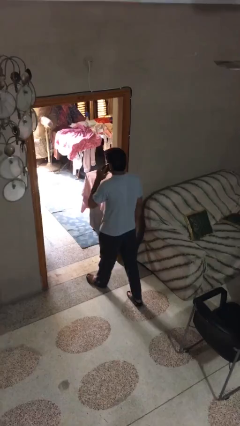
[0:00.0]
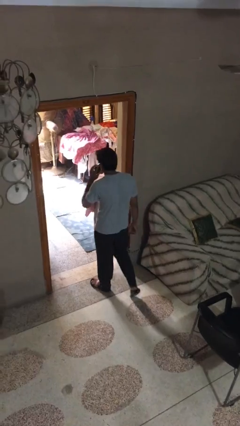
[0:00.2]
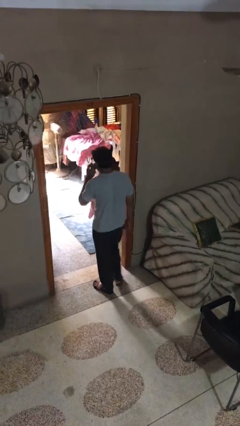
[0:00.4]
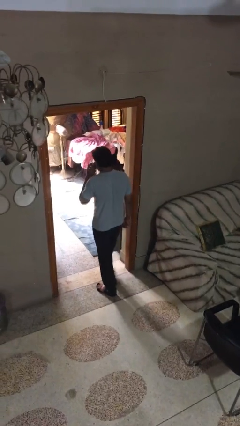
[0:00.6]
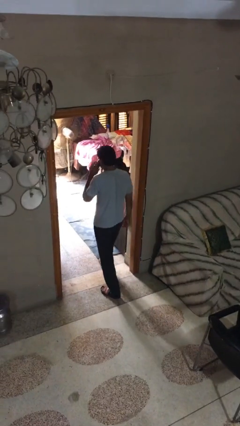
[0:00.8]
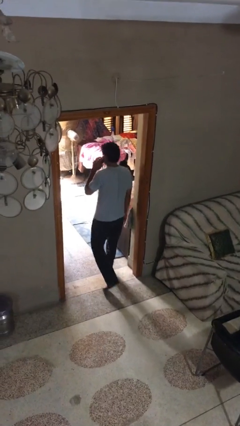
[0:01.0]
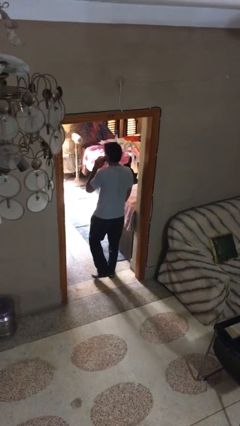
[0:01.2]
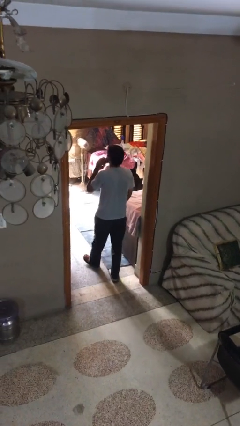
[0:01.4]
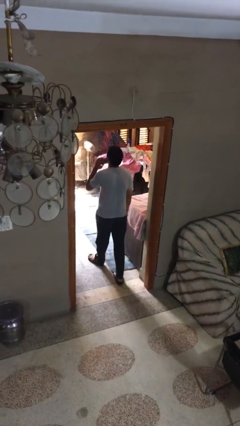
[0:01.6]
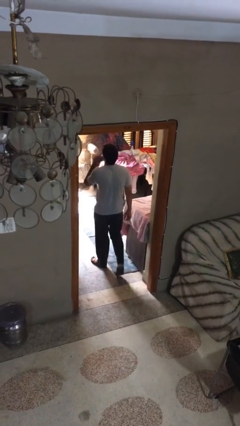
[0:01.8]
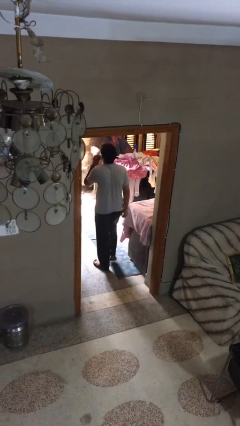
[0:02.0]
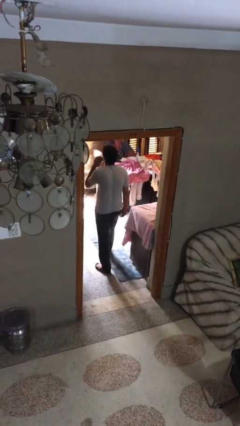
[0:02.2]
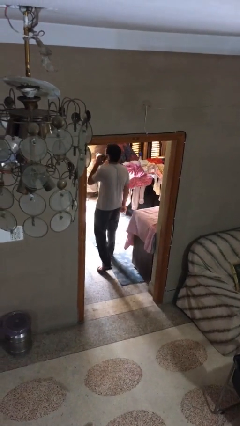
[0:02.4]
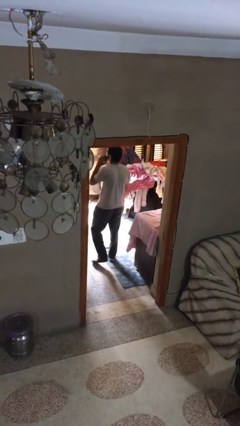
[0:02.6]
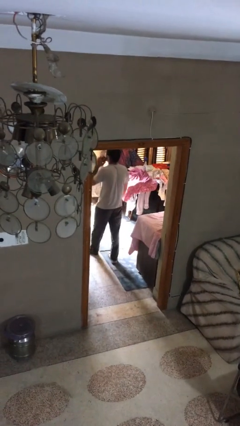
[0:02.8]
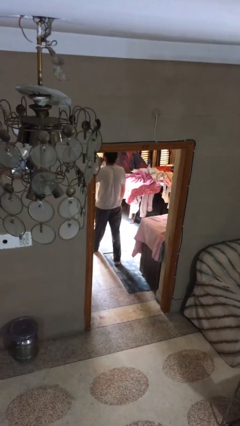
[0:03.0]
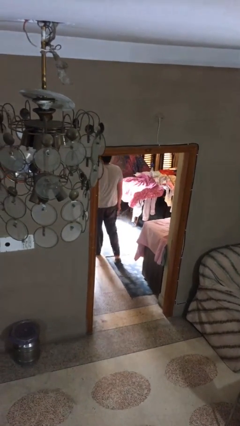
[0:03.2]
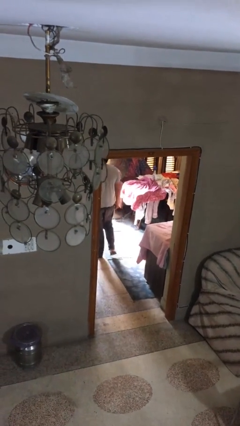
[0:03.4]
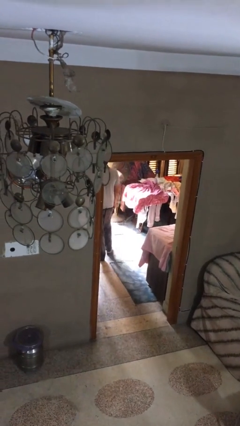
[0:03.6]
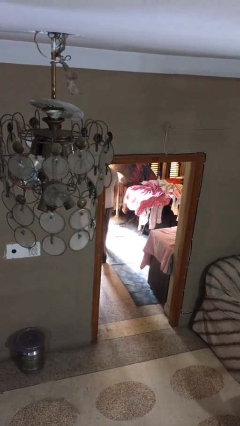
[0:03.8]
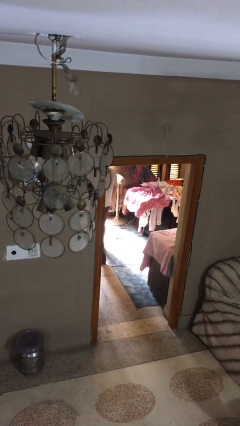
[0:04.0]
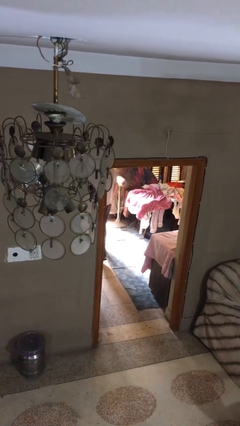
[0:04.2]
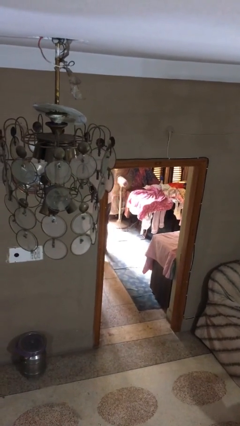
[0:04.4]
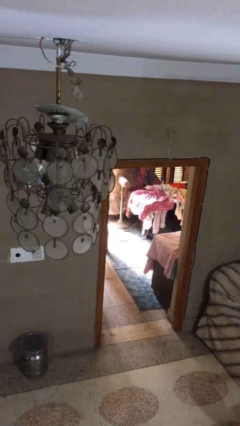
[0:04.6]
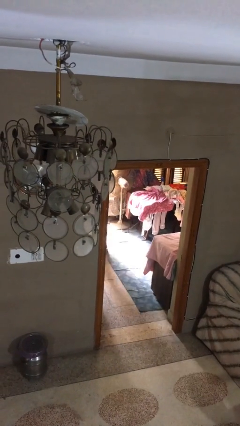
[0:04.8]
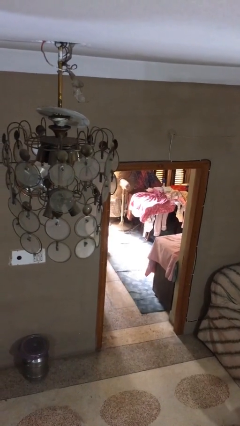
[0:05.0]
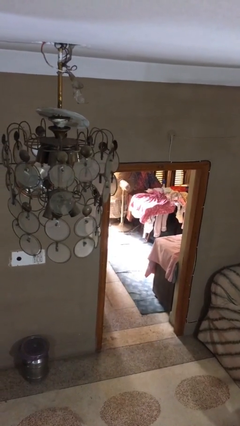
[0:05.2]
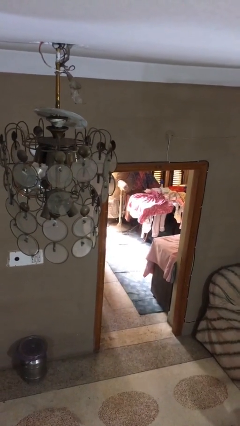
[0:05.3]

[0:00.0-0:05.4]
person exits scene through structure

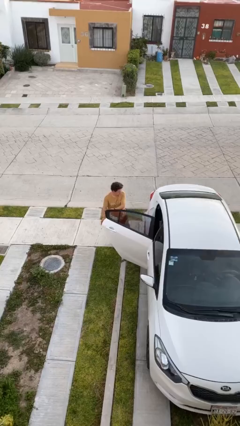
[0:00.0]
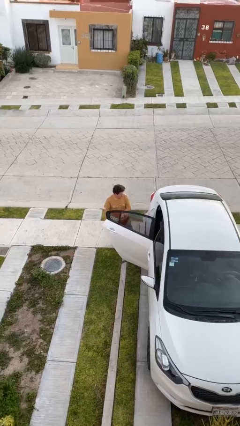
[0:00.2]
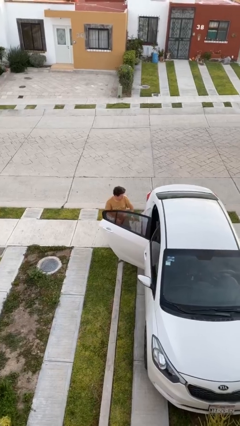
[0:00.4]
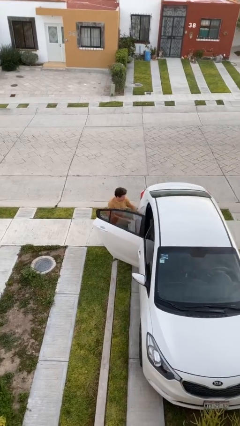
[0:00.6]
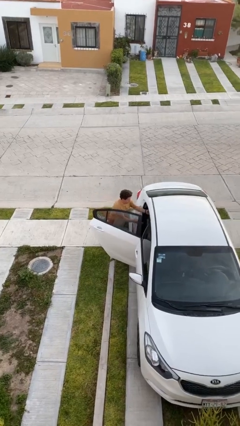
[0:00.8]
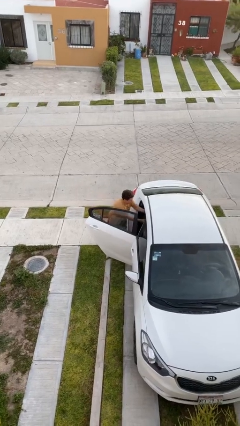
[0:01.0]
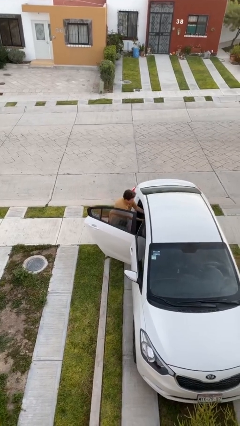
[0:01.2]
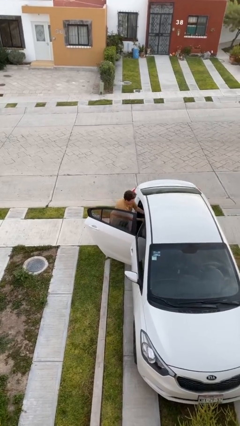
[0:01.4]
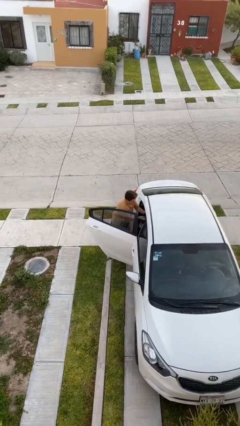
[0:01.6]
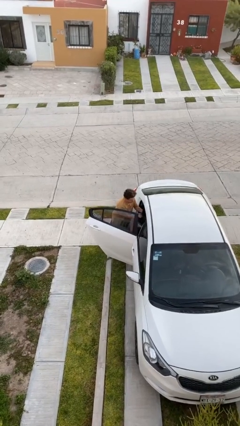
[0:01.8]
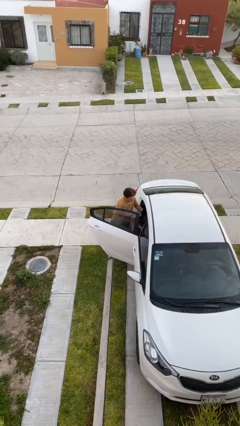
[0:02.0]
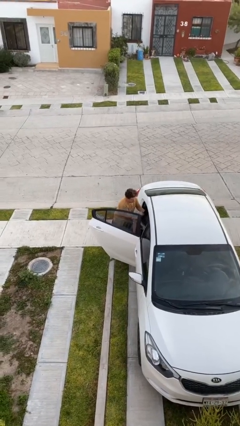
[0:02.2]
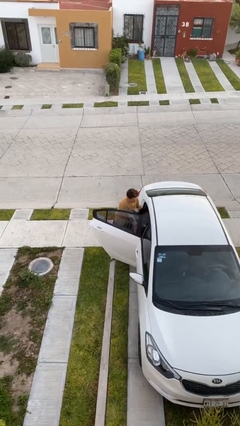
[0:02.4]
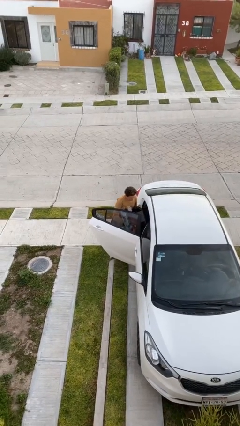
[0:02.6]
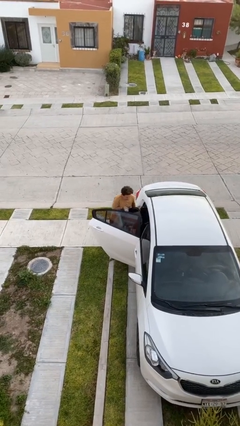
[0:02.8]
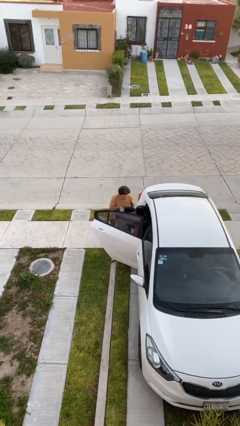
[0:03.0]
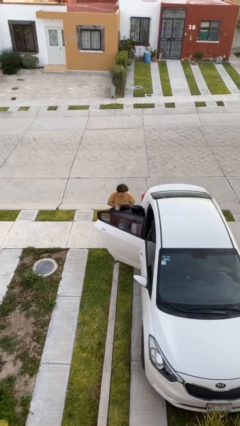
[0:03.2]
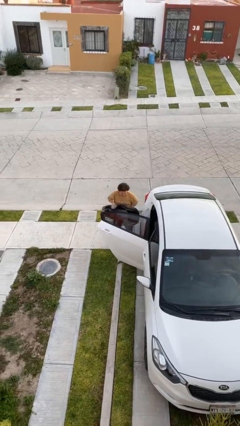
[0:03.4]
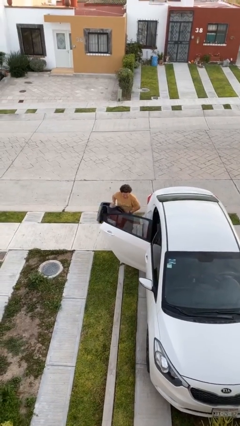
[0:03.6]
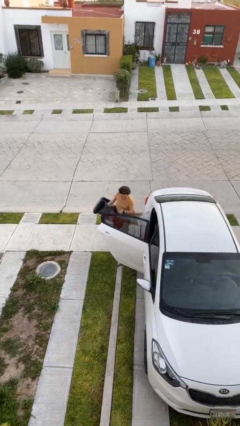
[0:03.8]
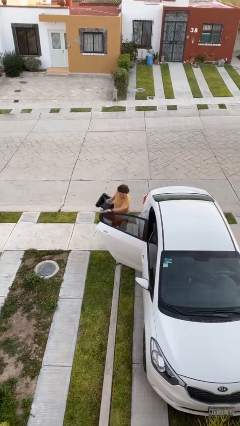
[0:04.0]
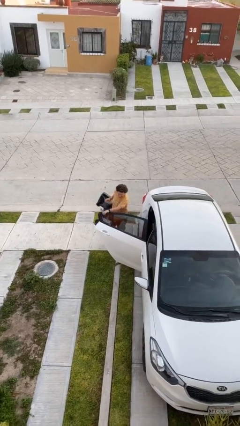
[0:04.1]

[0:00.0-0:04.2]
person unloads car

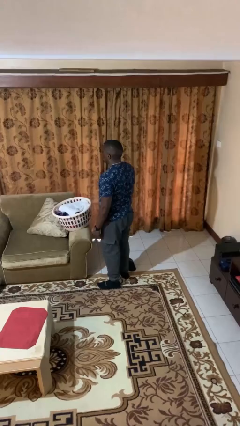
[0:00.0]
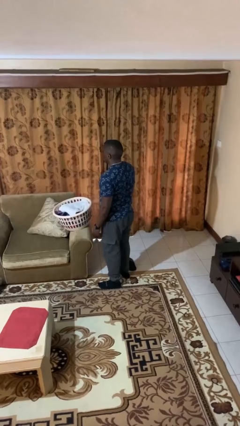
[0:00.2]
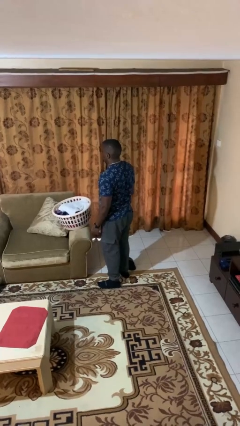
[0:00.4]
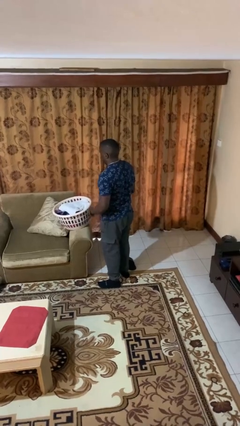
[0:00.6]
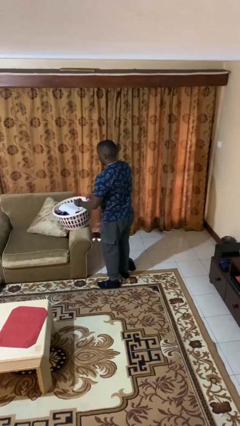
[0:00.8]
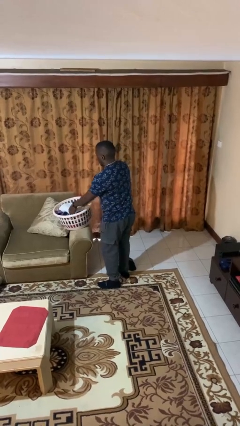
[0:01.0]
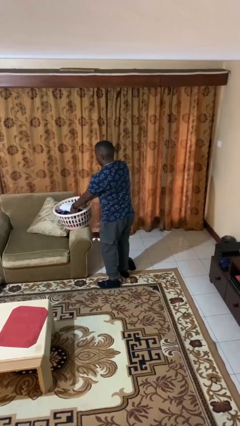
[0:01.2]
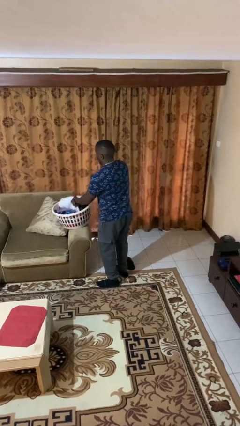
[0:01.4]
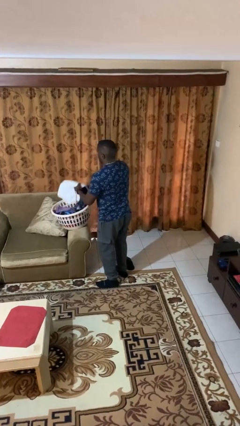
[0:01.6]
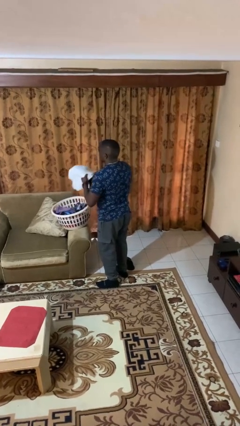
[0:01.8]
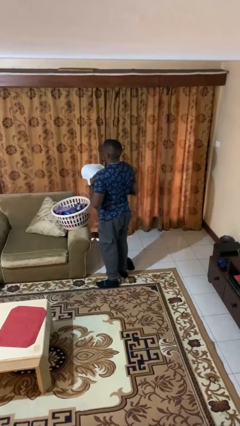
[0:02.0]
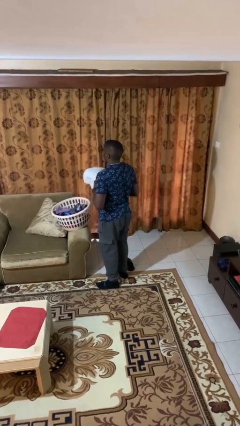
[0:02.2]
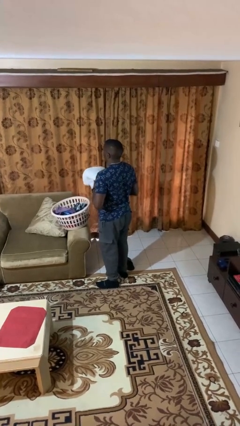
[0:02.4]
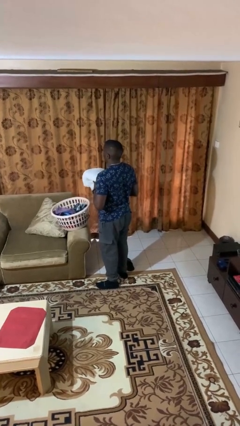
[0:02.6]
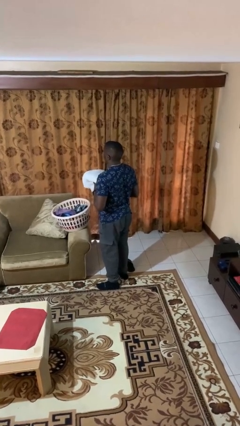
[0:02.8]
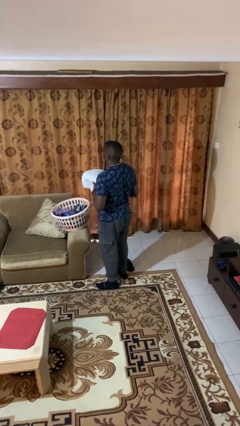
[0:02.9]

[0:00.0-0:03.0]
person takes object from basket

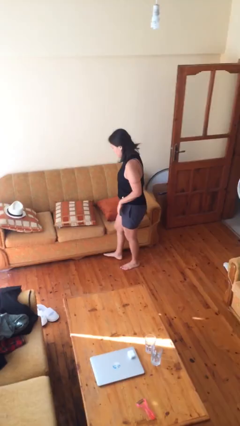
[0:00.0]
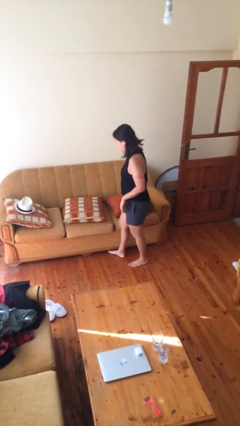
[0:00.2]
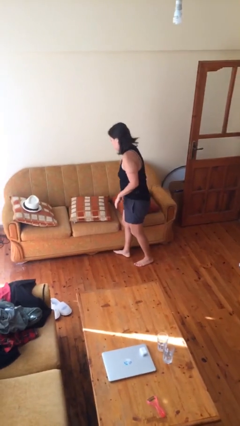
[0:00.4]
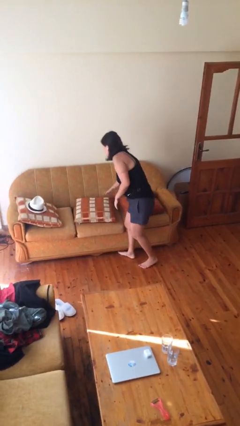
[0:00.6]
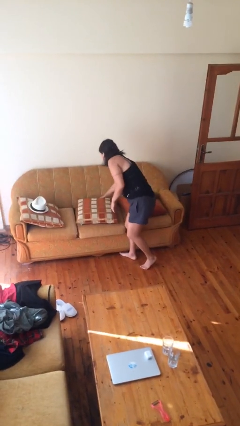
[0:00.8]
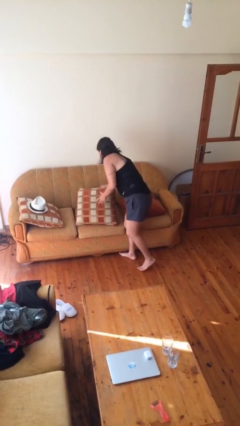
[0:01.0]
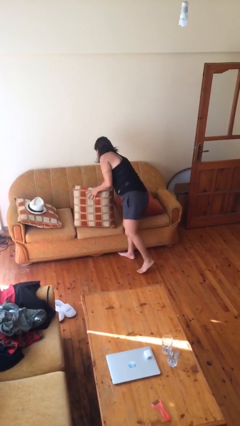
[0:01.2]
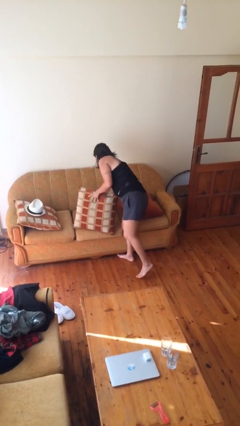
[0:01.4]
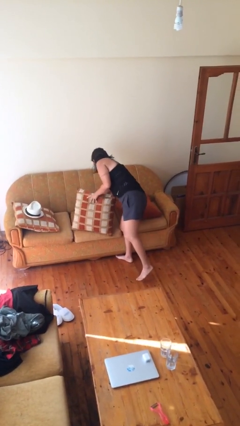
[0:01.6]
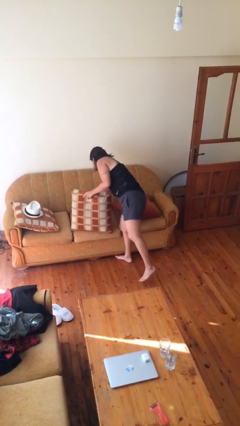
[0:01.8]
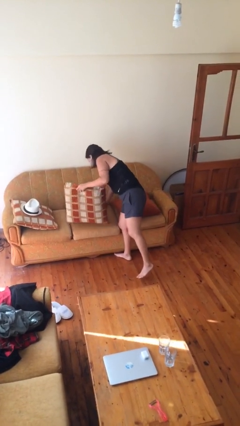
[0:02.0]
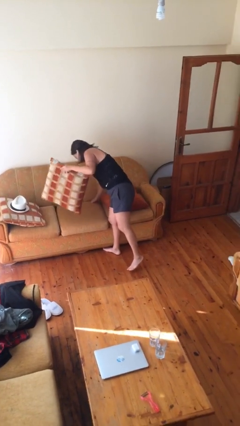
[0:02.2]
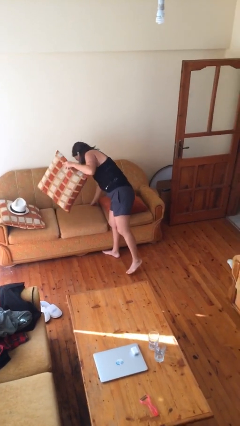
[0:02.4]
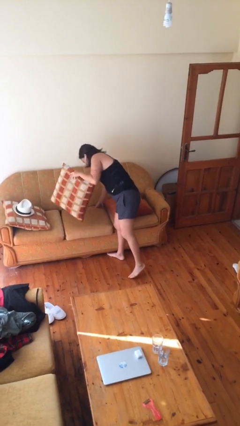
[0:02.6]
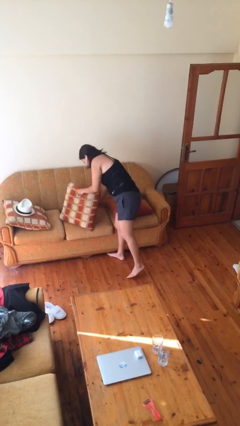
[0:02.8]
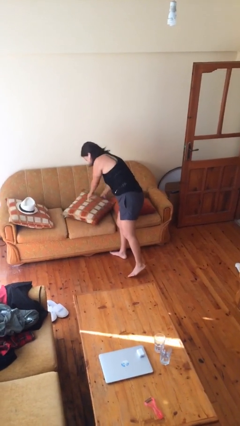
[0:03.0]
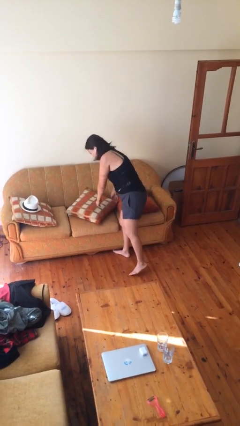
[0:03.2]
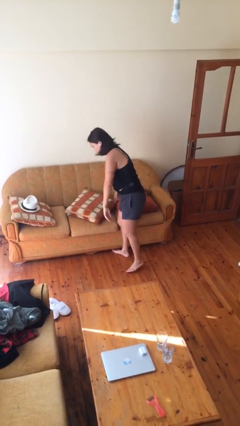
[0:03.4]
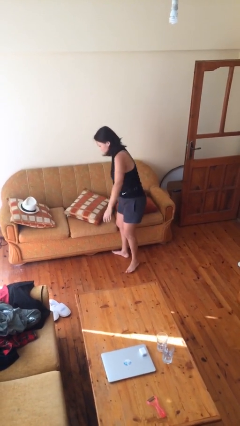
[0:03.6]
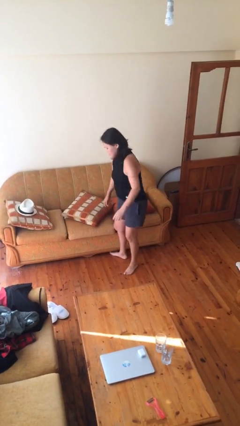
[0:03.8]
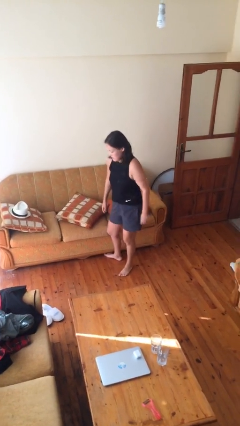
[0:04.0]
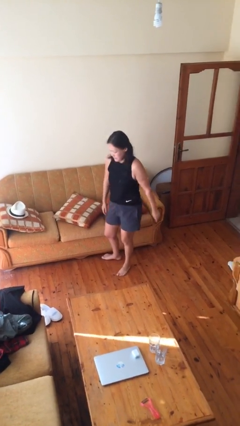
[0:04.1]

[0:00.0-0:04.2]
person searches in couch

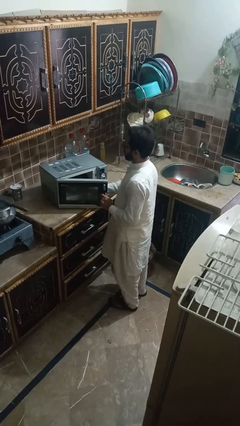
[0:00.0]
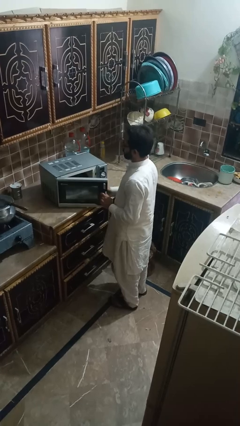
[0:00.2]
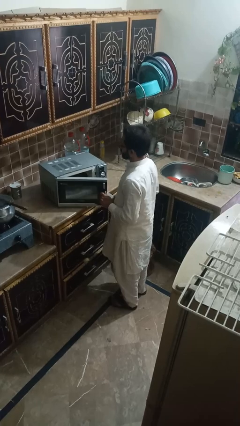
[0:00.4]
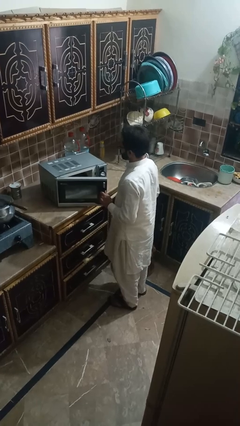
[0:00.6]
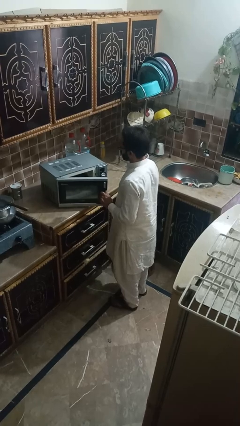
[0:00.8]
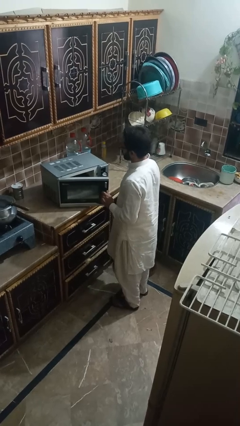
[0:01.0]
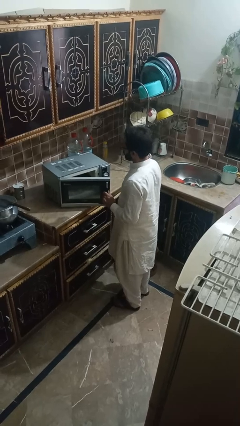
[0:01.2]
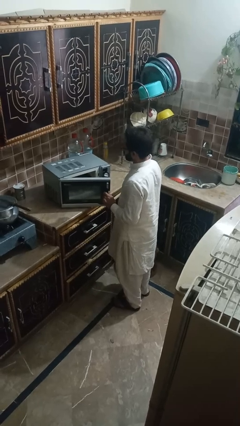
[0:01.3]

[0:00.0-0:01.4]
person takes object from microwave
